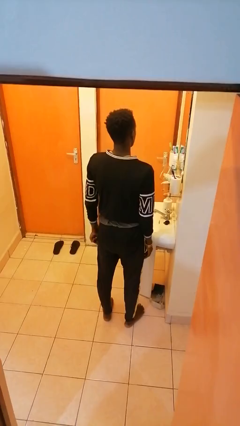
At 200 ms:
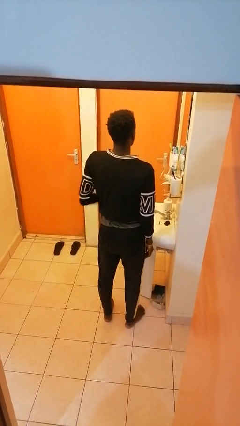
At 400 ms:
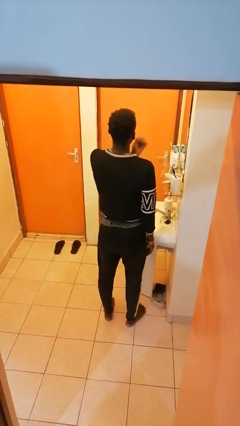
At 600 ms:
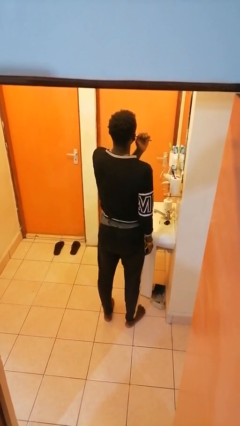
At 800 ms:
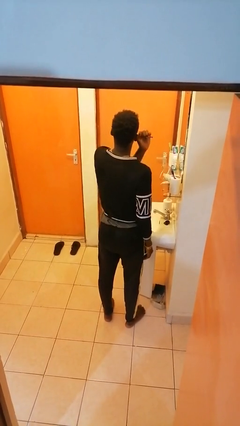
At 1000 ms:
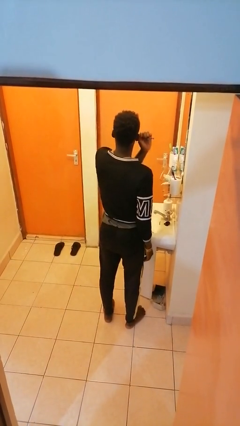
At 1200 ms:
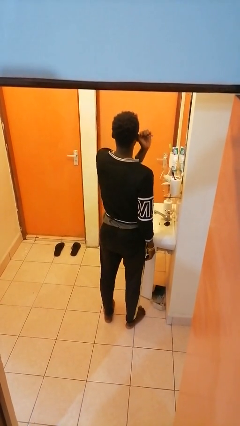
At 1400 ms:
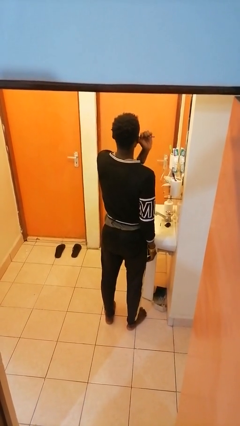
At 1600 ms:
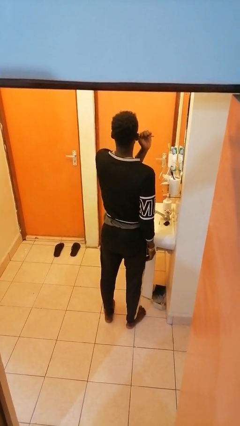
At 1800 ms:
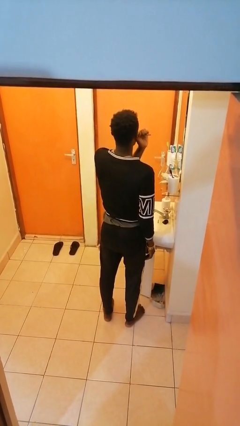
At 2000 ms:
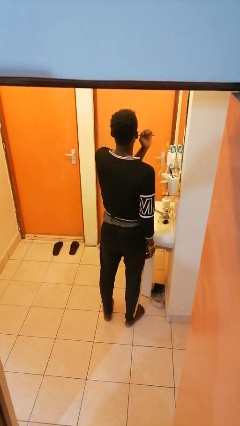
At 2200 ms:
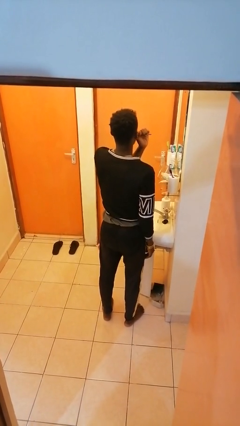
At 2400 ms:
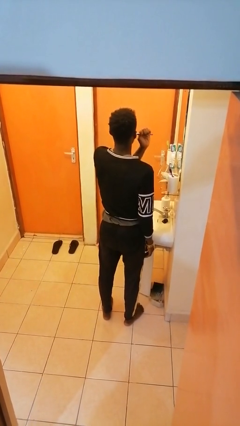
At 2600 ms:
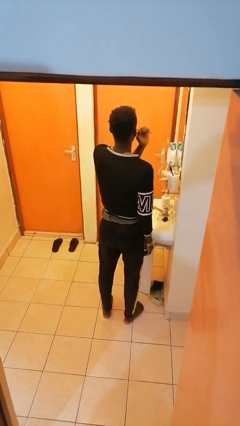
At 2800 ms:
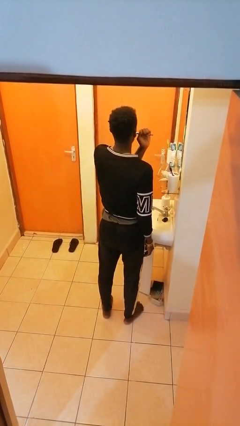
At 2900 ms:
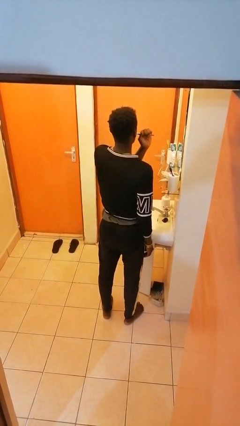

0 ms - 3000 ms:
person brushes teeth

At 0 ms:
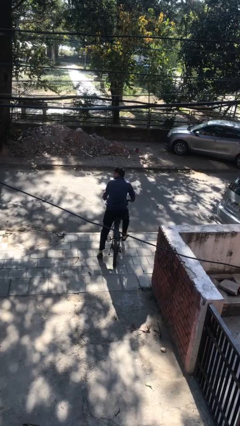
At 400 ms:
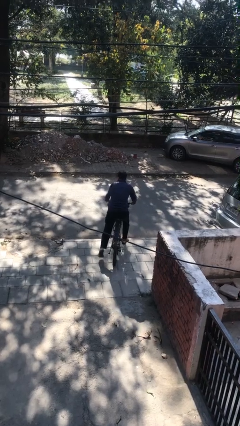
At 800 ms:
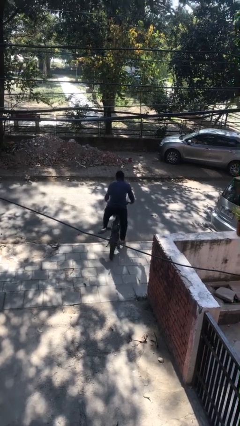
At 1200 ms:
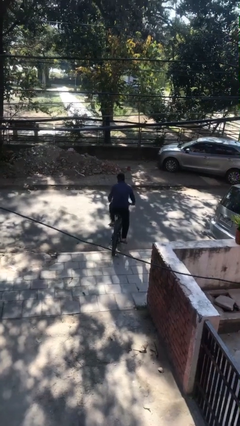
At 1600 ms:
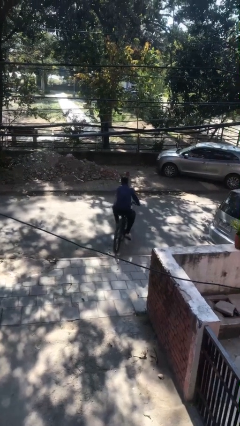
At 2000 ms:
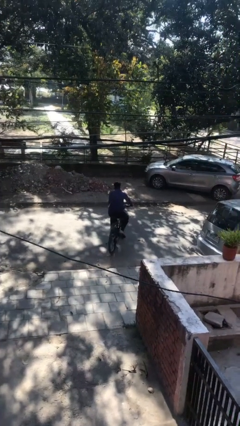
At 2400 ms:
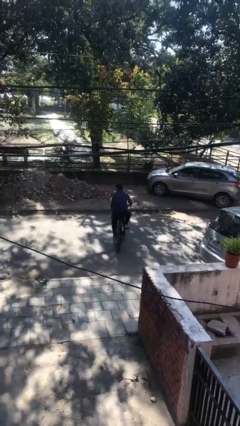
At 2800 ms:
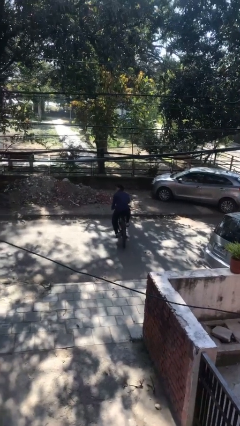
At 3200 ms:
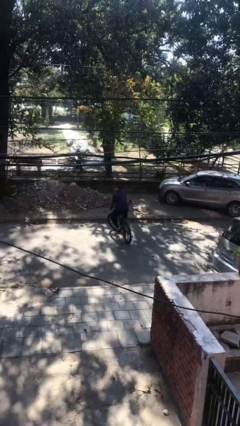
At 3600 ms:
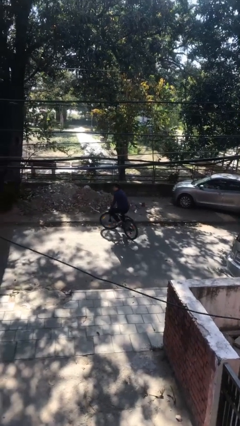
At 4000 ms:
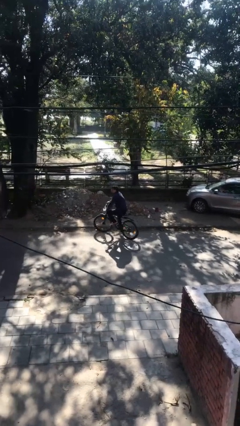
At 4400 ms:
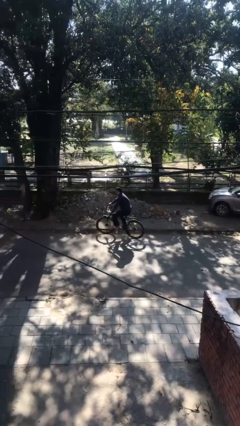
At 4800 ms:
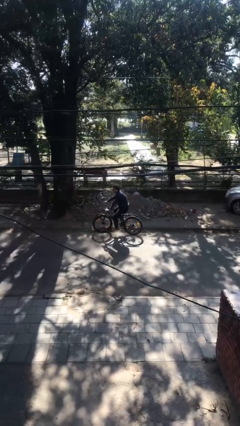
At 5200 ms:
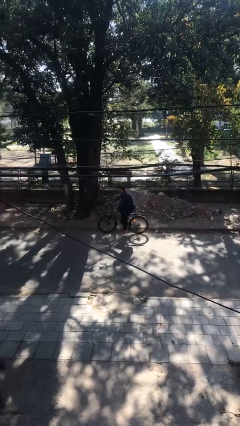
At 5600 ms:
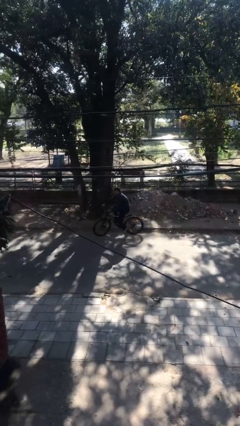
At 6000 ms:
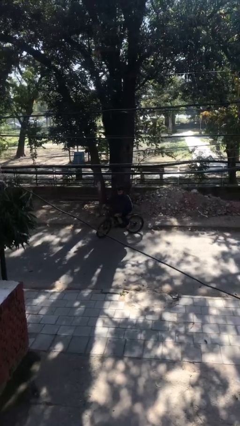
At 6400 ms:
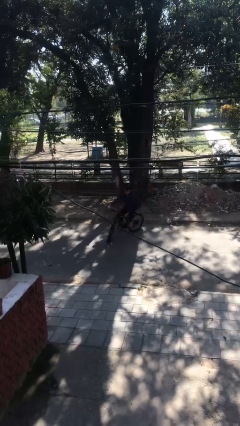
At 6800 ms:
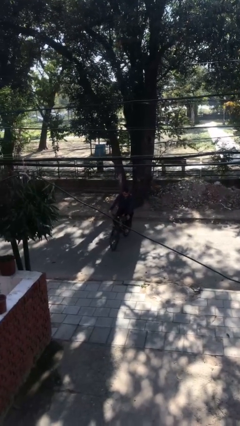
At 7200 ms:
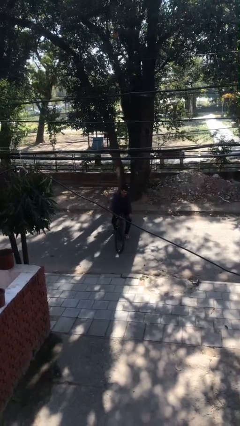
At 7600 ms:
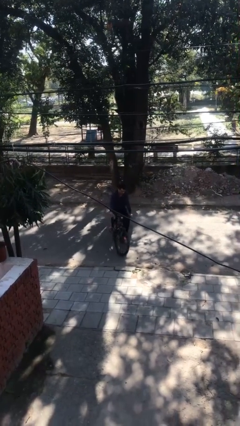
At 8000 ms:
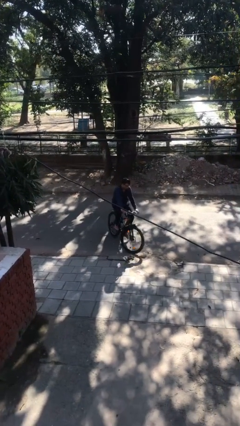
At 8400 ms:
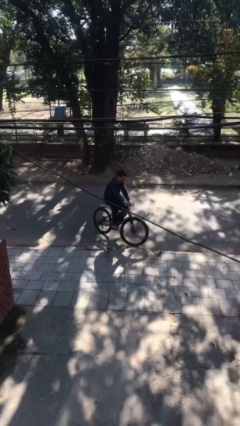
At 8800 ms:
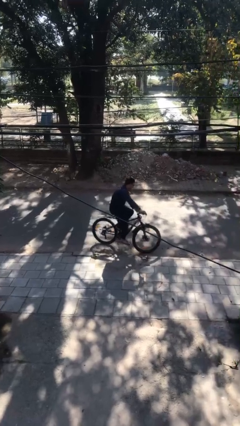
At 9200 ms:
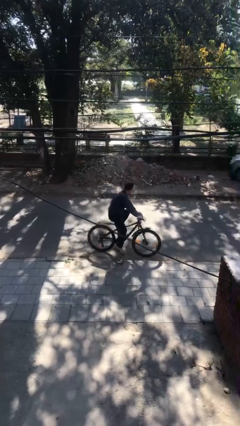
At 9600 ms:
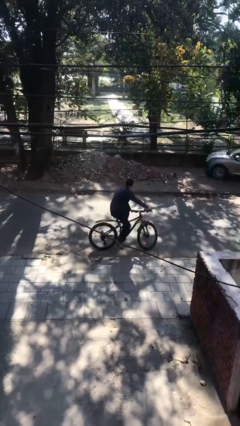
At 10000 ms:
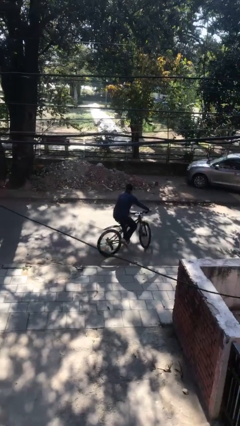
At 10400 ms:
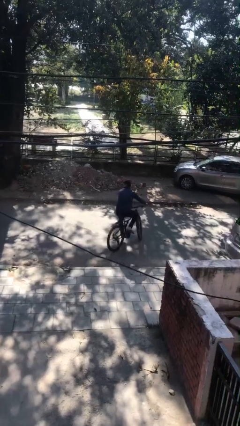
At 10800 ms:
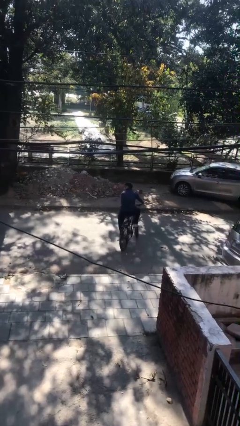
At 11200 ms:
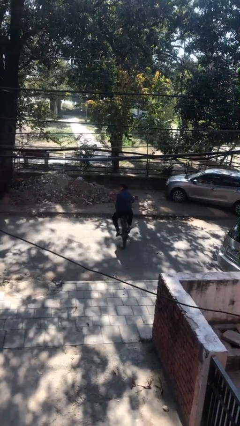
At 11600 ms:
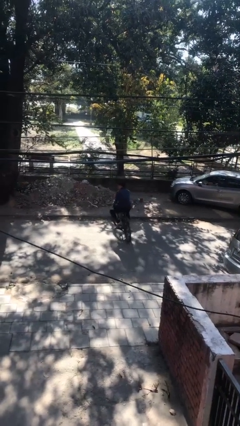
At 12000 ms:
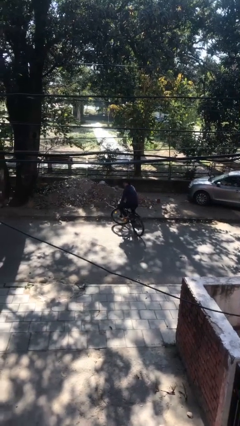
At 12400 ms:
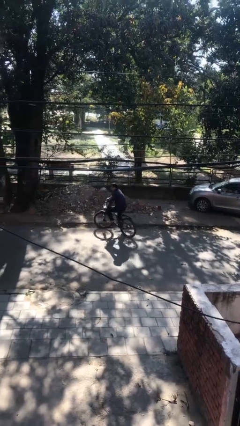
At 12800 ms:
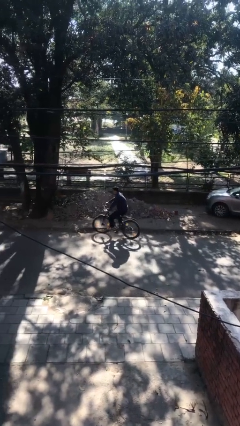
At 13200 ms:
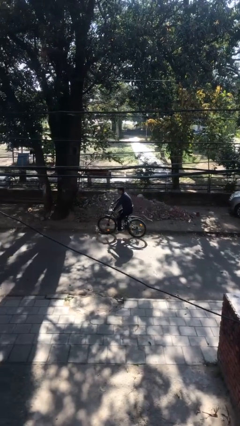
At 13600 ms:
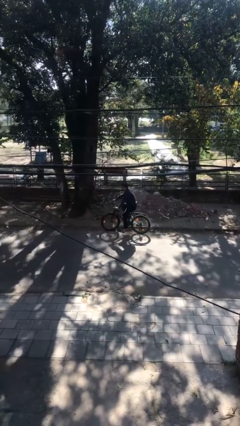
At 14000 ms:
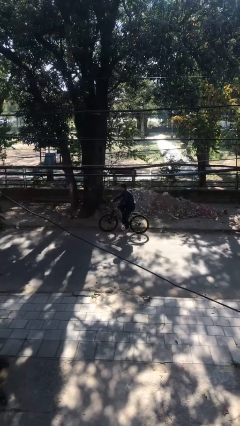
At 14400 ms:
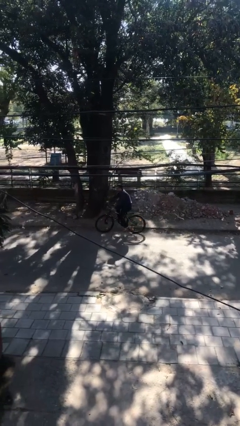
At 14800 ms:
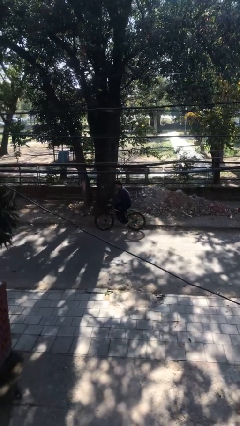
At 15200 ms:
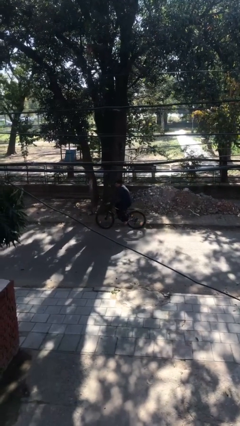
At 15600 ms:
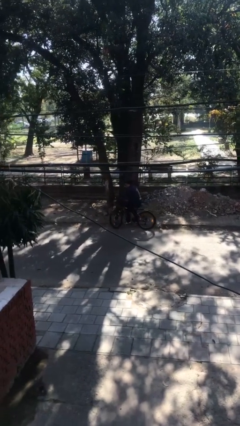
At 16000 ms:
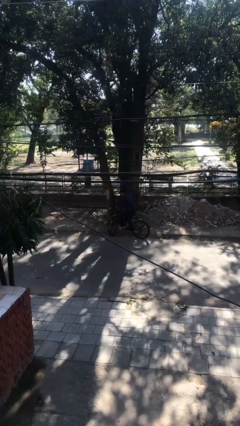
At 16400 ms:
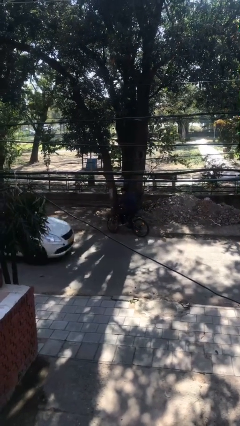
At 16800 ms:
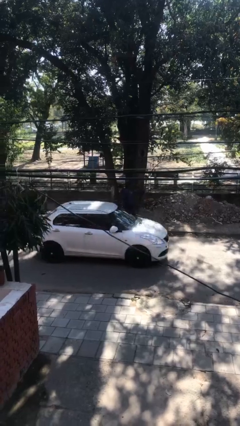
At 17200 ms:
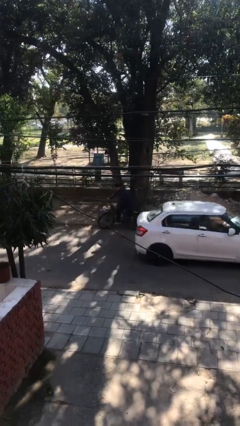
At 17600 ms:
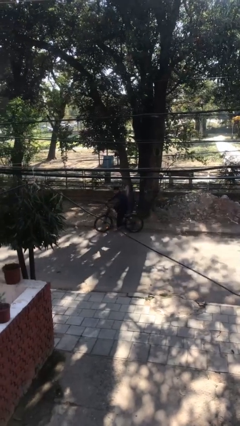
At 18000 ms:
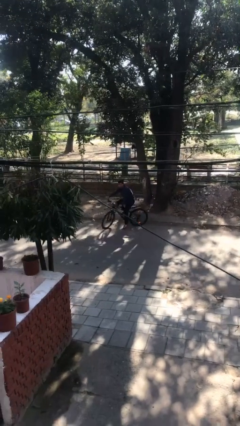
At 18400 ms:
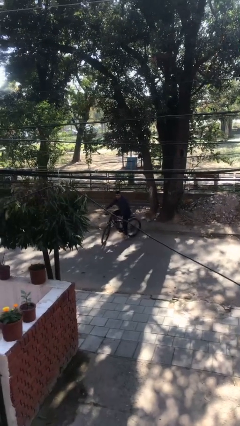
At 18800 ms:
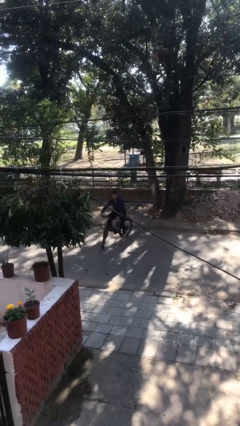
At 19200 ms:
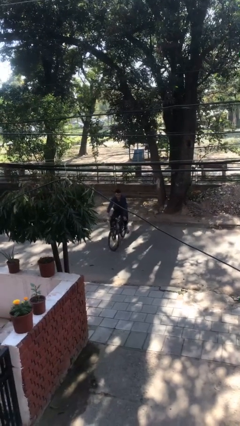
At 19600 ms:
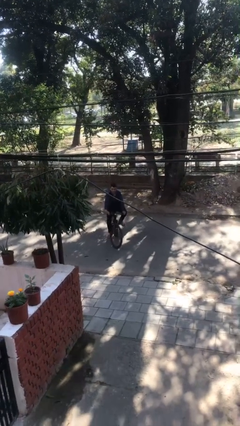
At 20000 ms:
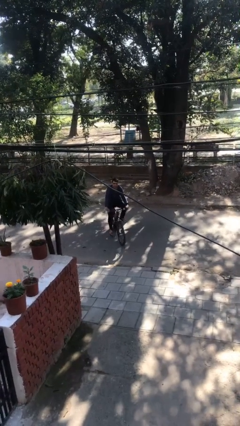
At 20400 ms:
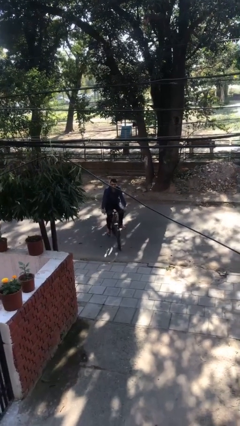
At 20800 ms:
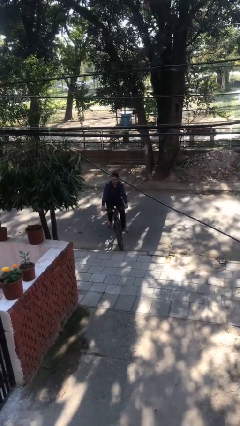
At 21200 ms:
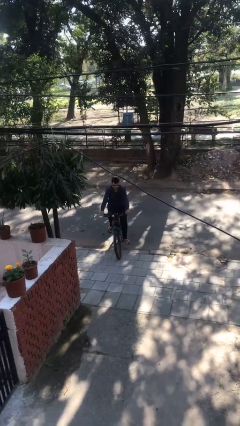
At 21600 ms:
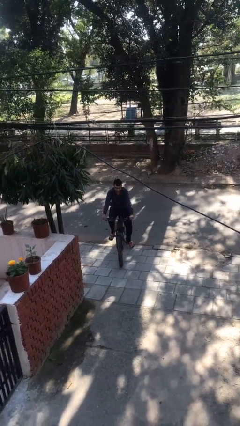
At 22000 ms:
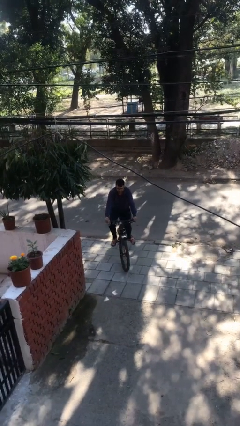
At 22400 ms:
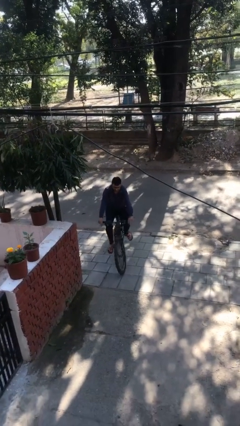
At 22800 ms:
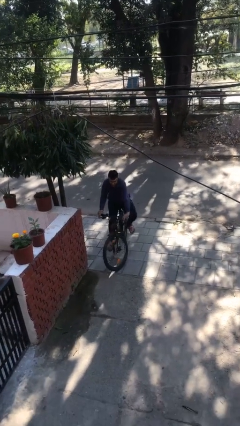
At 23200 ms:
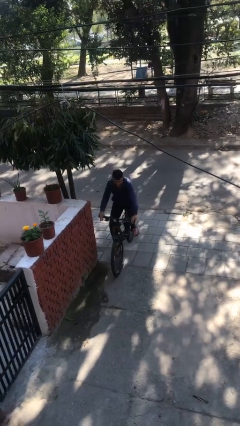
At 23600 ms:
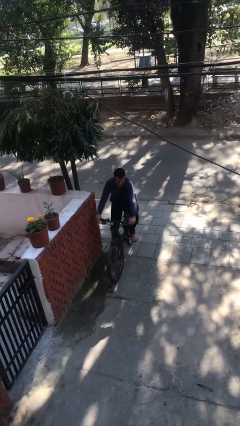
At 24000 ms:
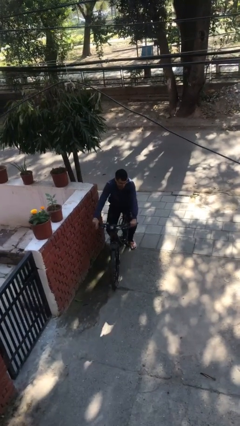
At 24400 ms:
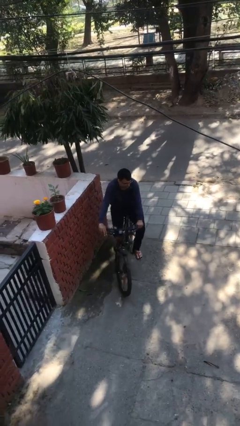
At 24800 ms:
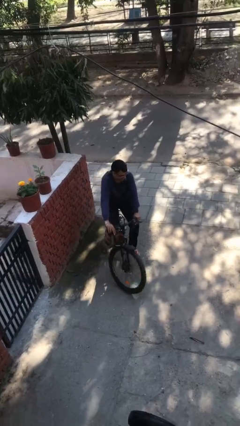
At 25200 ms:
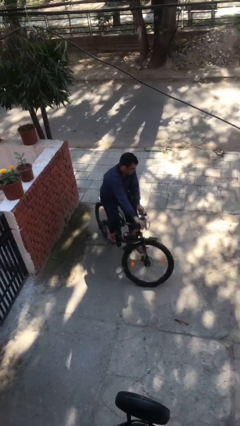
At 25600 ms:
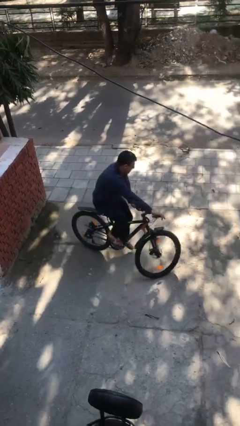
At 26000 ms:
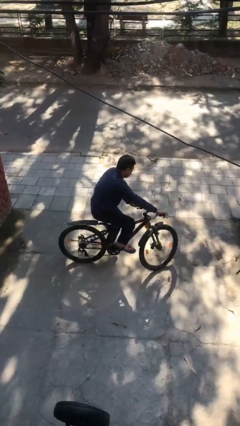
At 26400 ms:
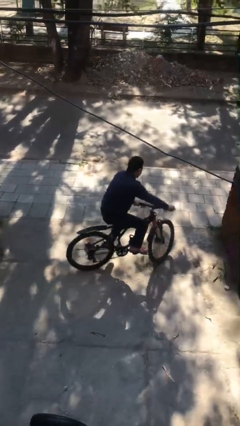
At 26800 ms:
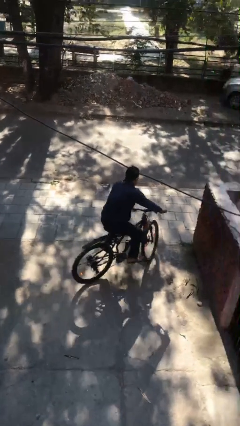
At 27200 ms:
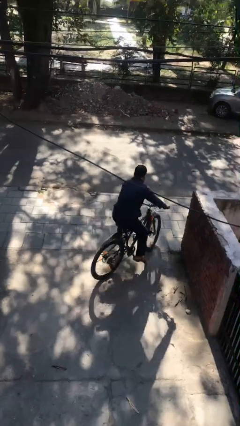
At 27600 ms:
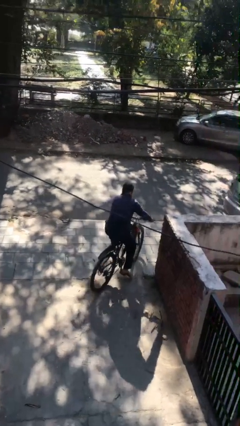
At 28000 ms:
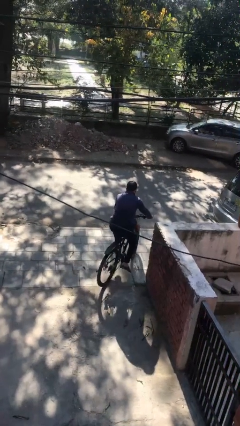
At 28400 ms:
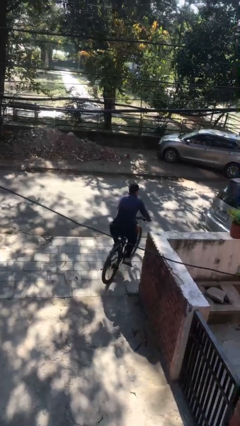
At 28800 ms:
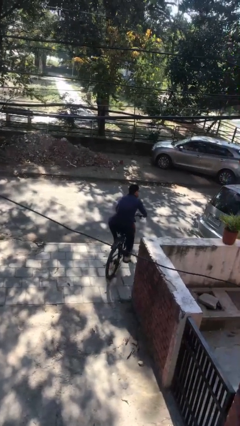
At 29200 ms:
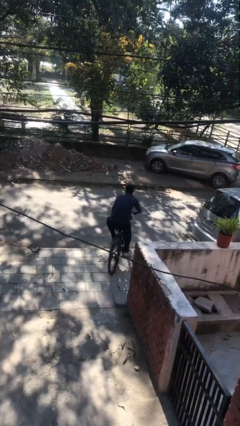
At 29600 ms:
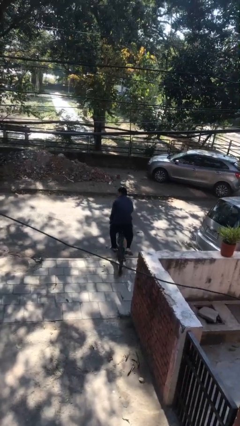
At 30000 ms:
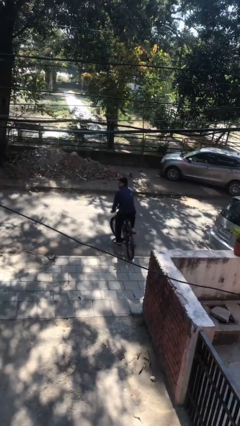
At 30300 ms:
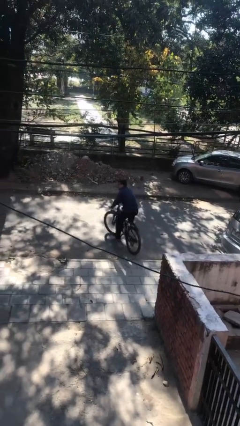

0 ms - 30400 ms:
person rides bicycle
